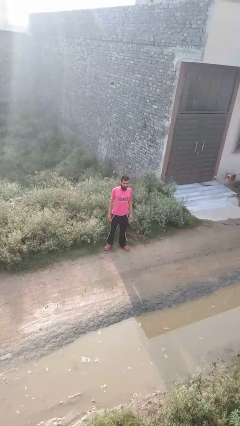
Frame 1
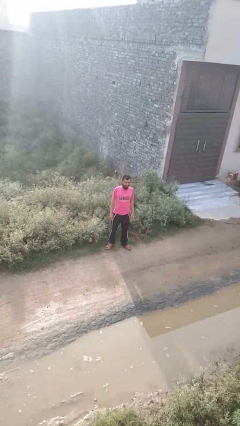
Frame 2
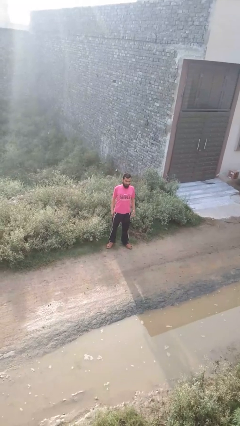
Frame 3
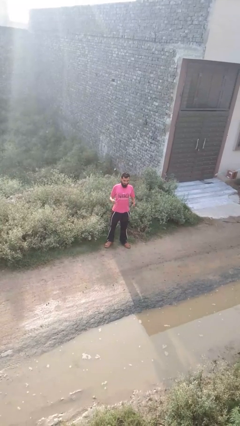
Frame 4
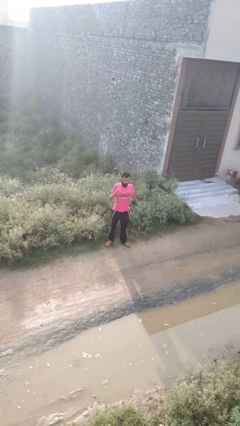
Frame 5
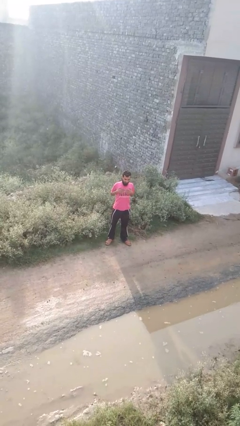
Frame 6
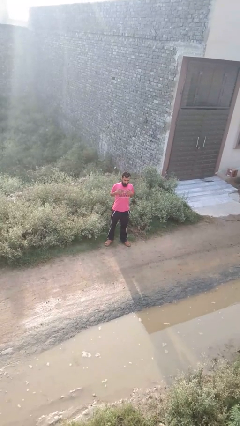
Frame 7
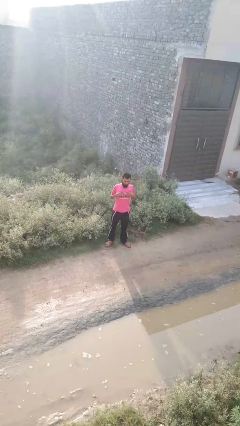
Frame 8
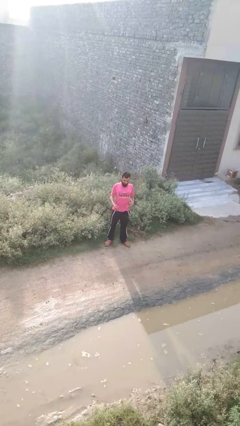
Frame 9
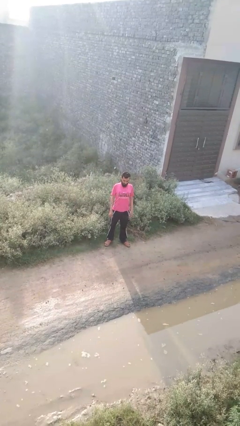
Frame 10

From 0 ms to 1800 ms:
person drums on chest

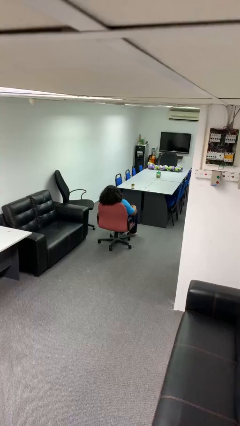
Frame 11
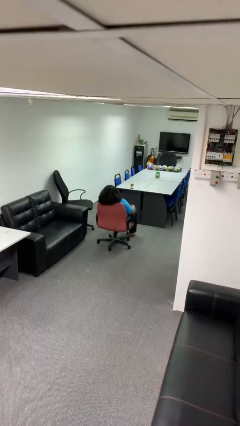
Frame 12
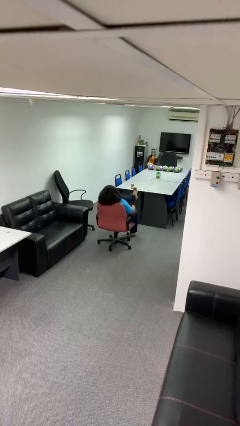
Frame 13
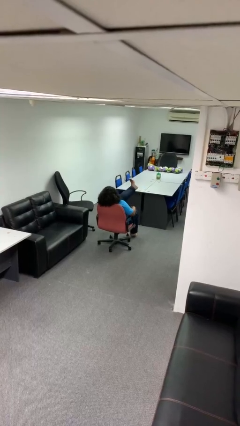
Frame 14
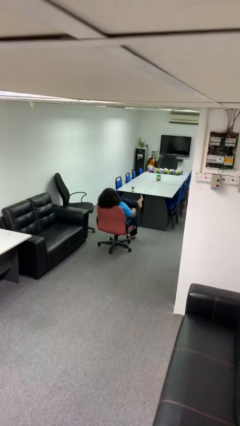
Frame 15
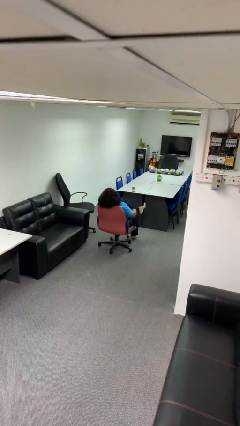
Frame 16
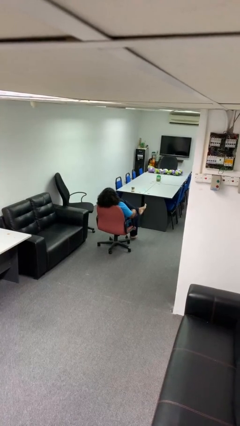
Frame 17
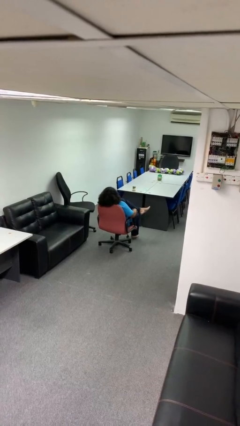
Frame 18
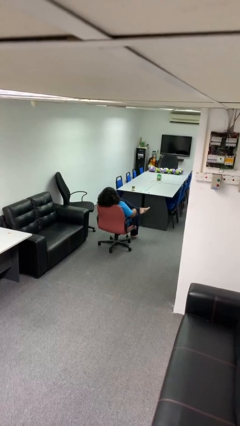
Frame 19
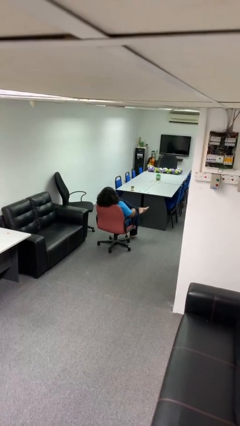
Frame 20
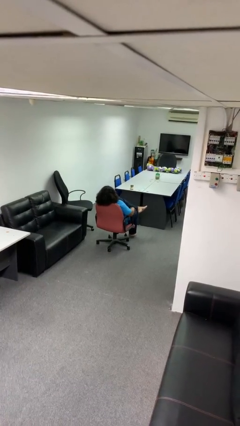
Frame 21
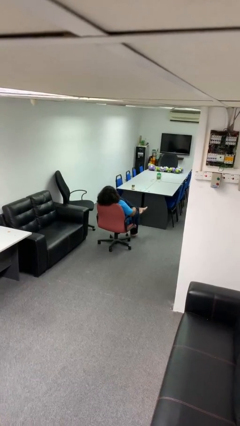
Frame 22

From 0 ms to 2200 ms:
person crosses legs

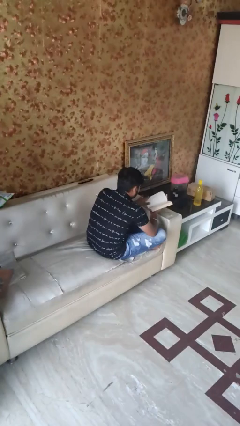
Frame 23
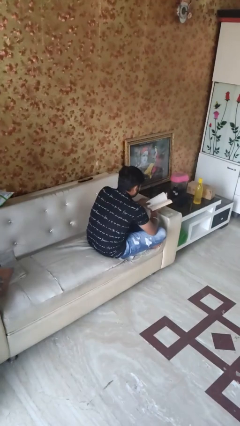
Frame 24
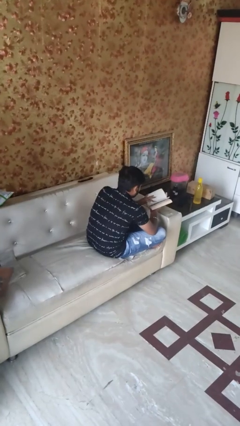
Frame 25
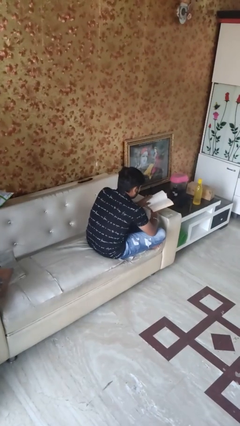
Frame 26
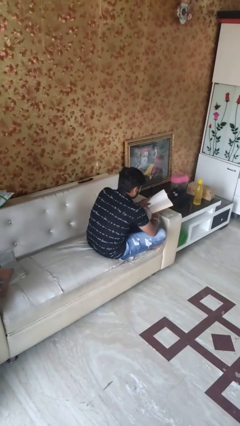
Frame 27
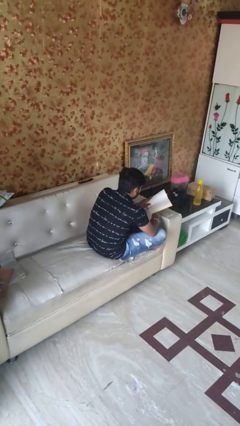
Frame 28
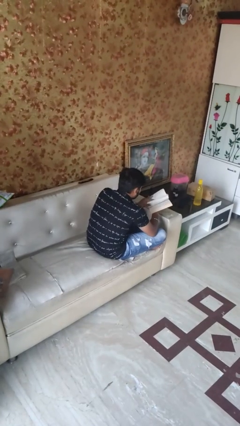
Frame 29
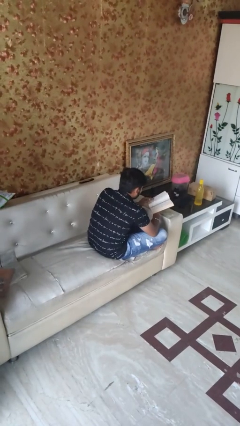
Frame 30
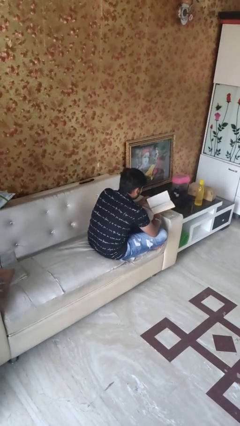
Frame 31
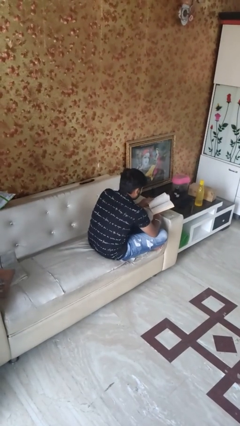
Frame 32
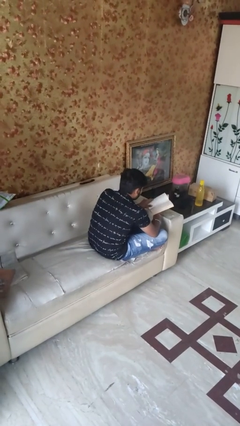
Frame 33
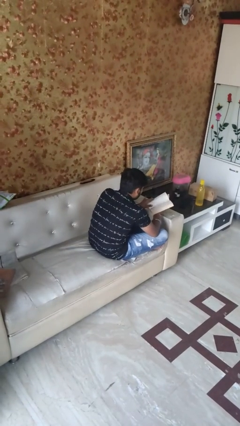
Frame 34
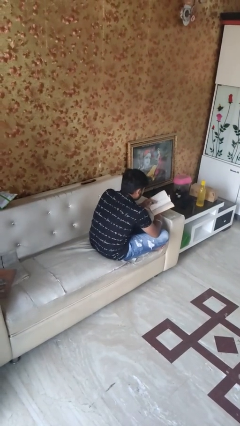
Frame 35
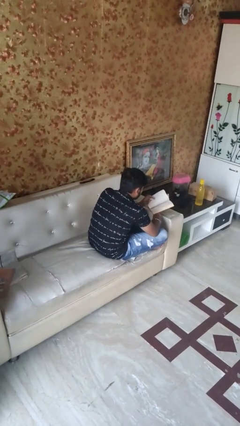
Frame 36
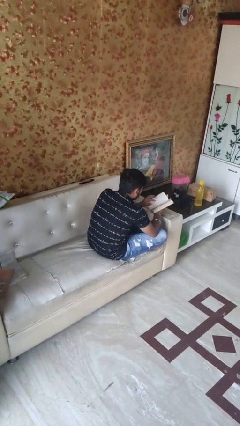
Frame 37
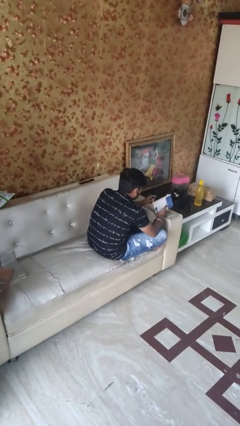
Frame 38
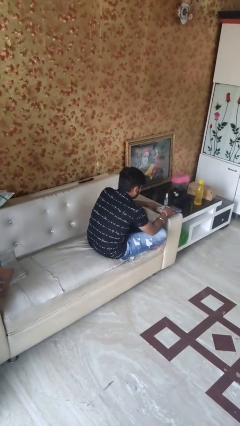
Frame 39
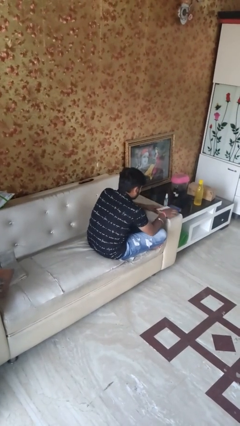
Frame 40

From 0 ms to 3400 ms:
person reads book

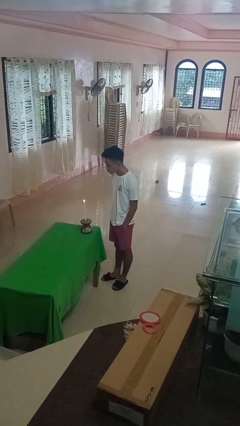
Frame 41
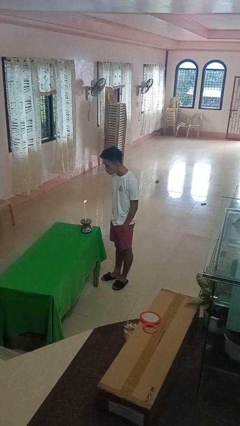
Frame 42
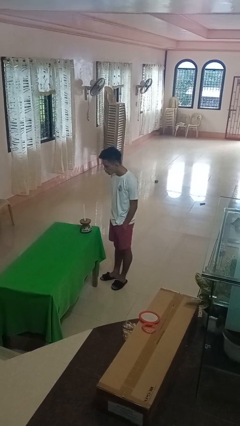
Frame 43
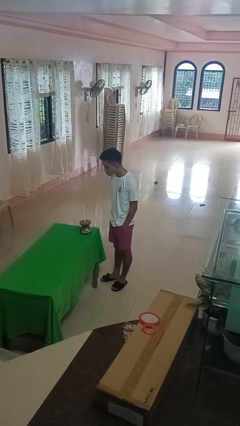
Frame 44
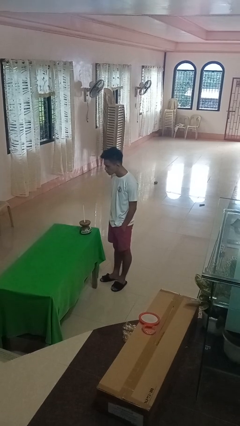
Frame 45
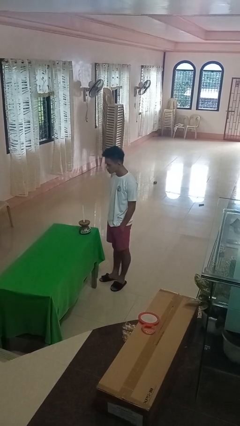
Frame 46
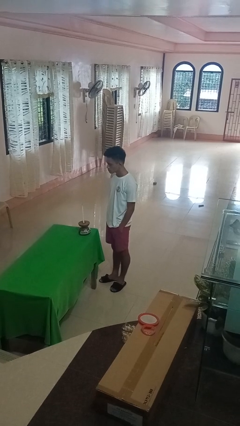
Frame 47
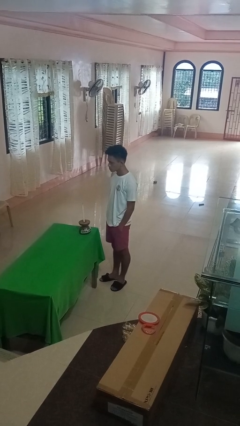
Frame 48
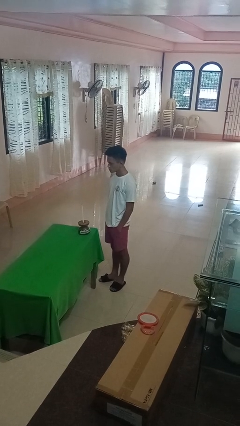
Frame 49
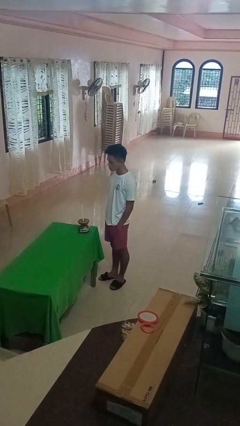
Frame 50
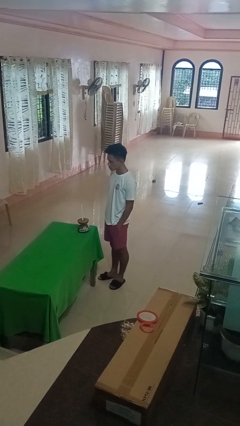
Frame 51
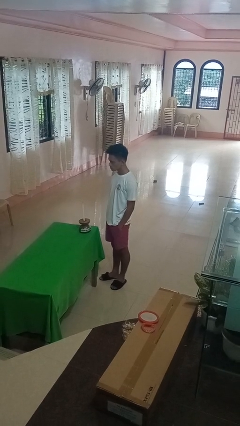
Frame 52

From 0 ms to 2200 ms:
person extinguishes candle

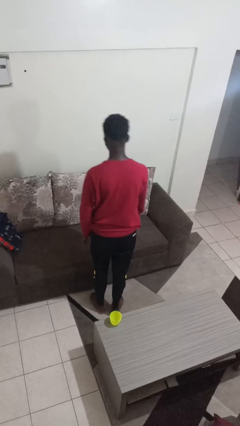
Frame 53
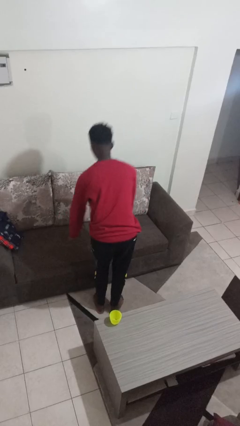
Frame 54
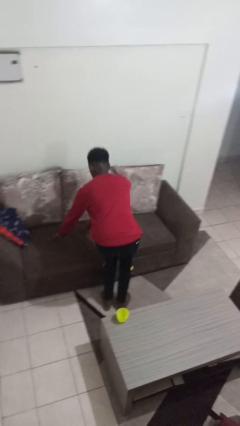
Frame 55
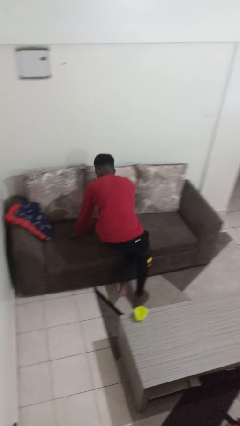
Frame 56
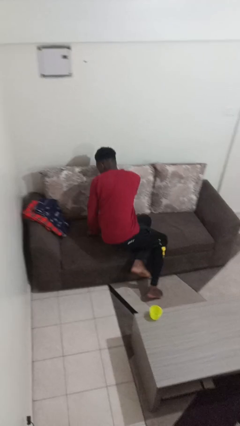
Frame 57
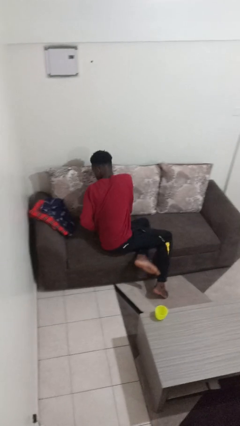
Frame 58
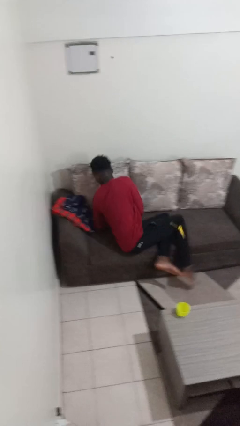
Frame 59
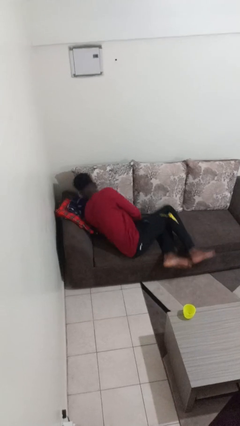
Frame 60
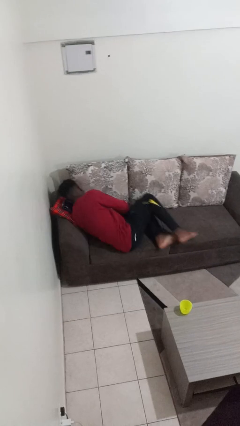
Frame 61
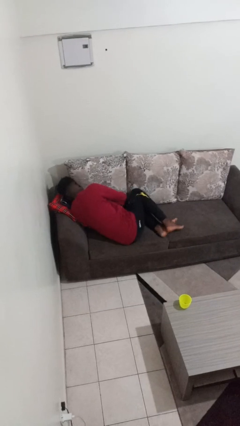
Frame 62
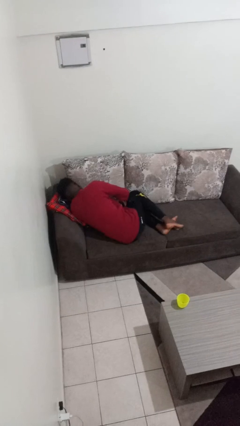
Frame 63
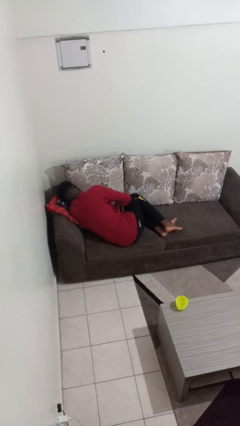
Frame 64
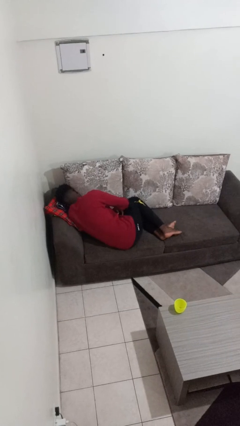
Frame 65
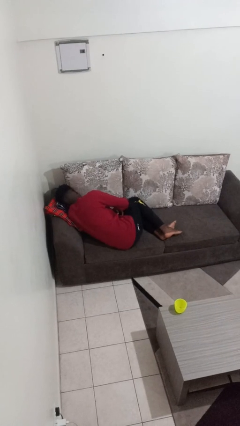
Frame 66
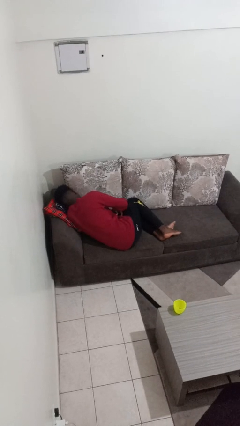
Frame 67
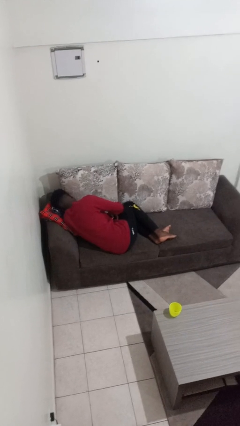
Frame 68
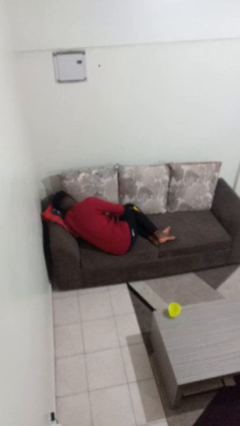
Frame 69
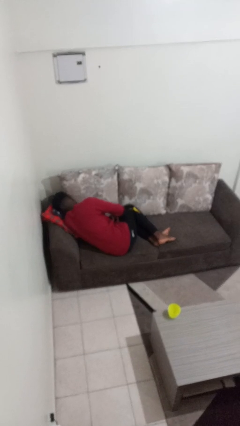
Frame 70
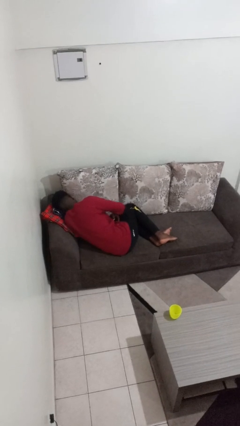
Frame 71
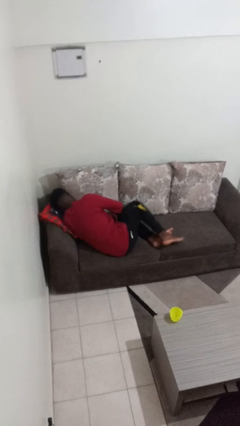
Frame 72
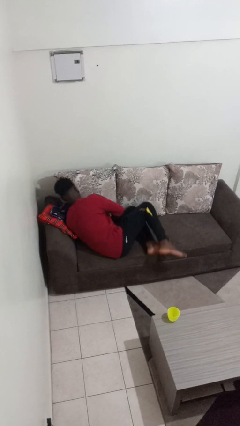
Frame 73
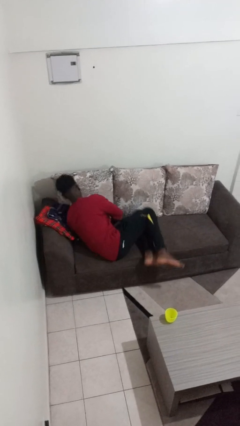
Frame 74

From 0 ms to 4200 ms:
person lies down on couch

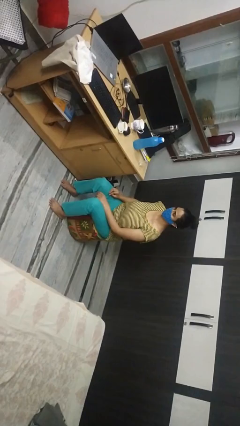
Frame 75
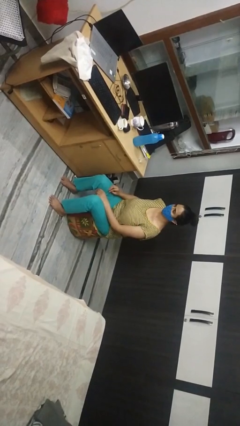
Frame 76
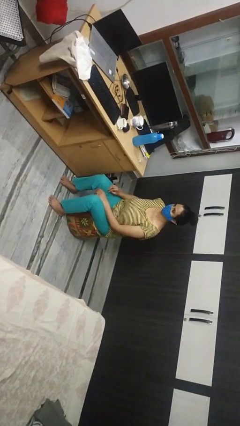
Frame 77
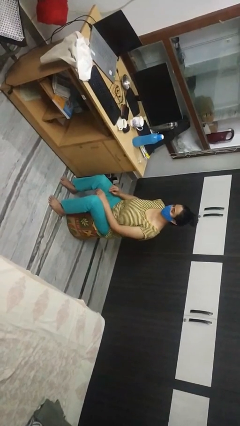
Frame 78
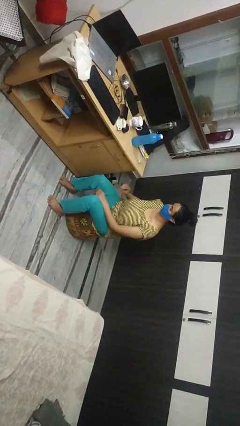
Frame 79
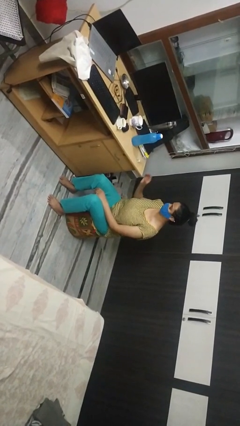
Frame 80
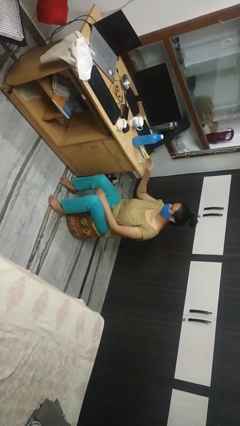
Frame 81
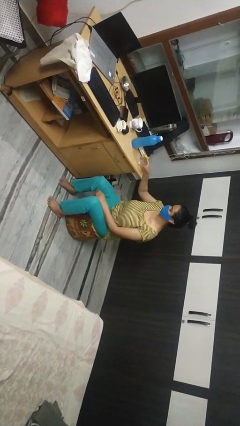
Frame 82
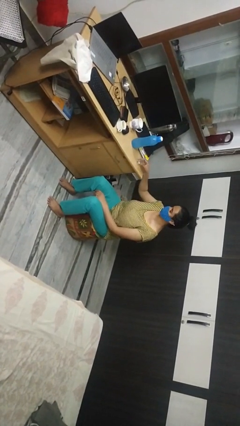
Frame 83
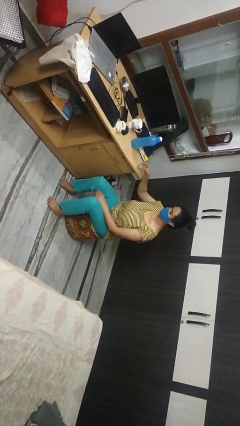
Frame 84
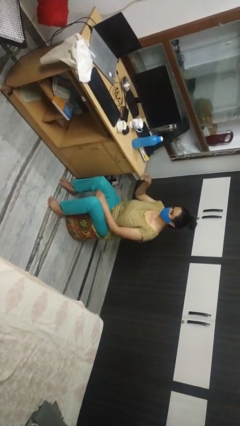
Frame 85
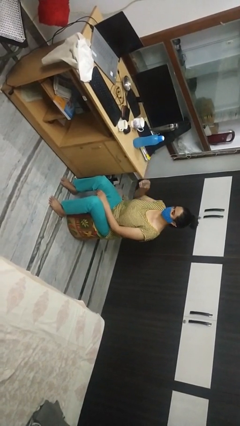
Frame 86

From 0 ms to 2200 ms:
person picks up object from table

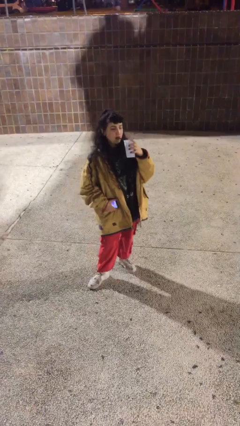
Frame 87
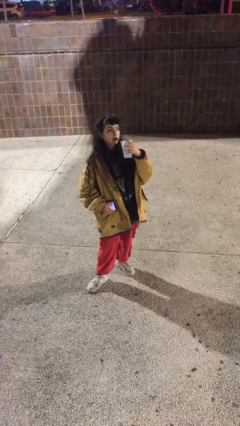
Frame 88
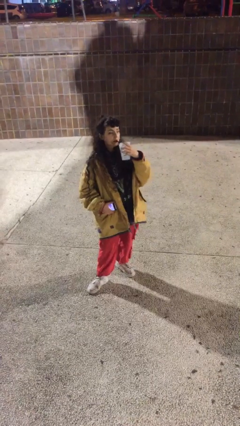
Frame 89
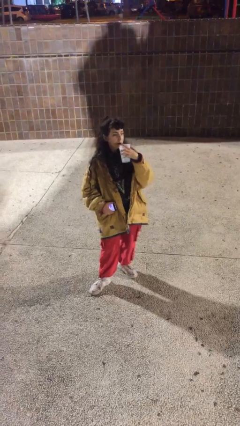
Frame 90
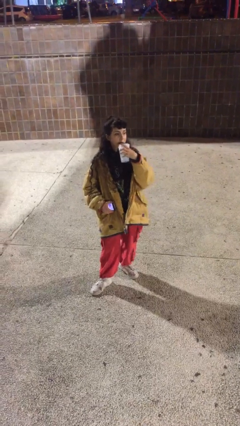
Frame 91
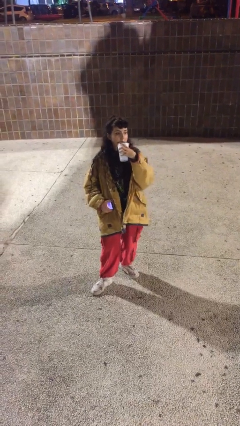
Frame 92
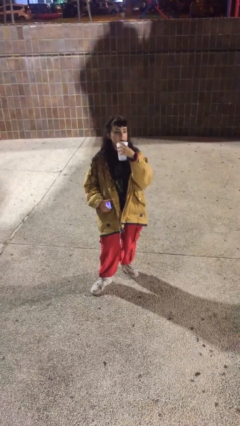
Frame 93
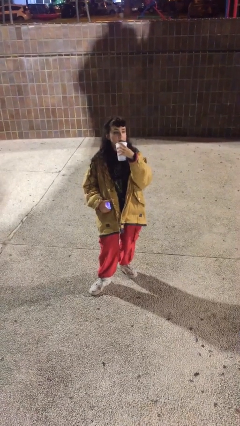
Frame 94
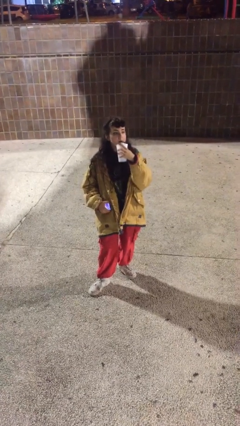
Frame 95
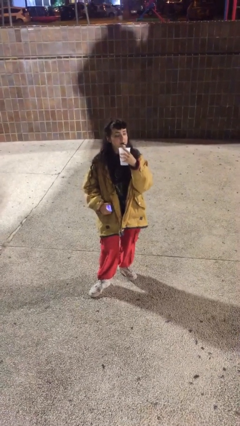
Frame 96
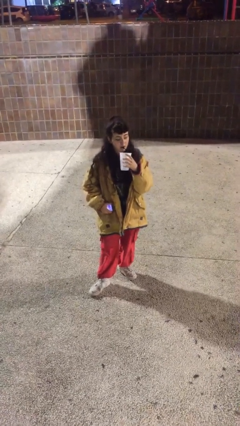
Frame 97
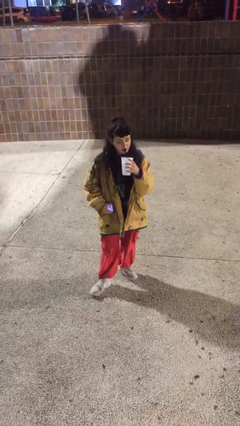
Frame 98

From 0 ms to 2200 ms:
person drinks from straw
